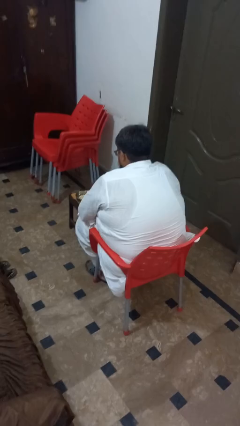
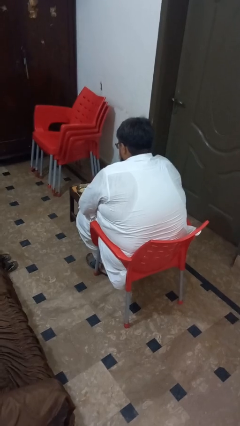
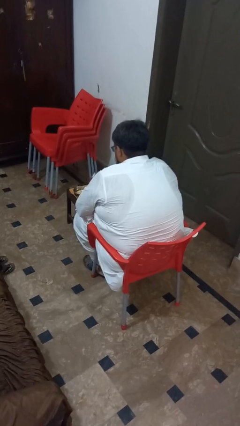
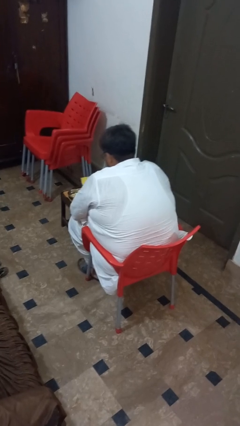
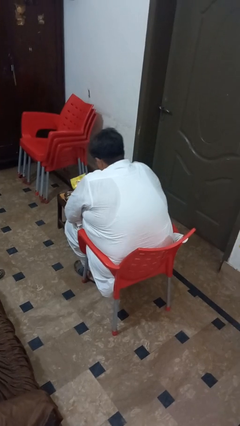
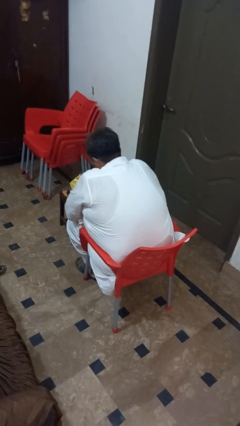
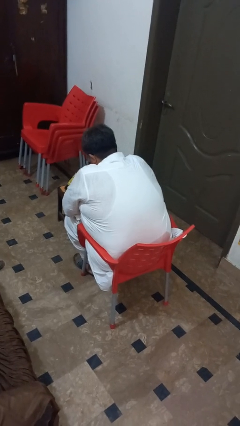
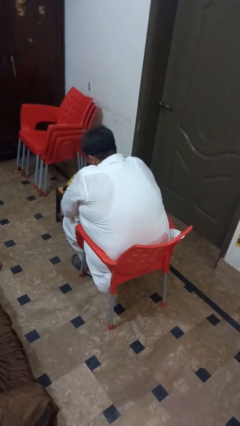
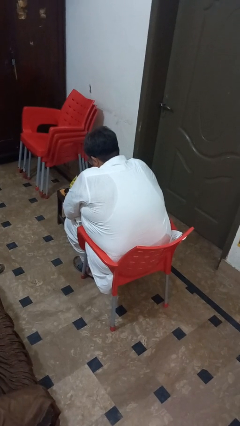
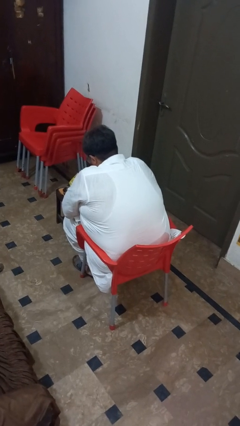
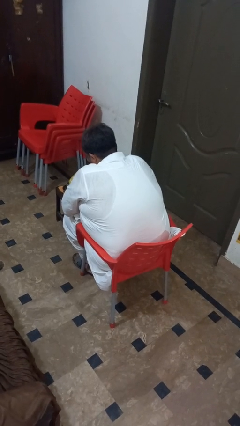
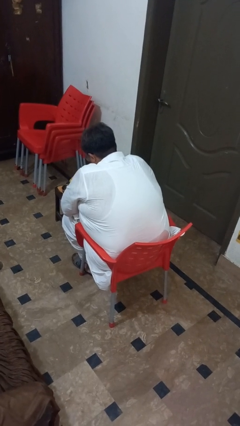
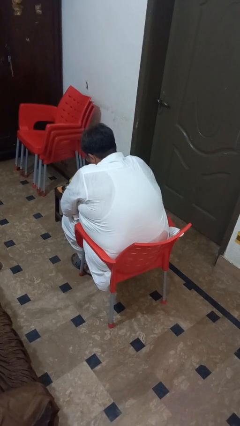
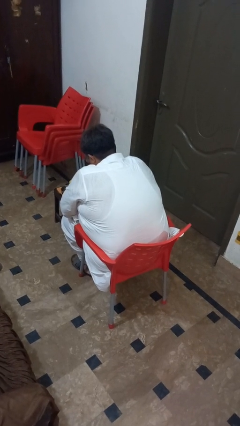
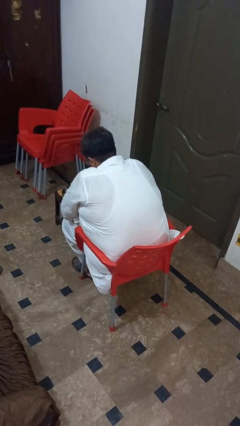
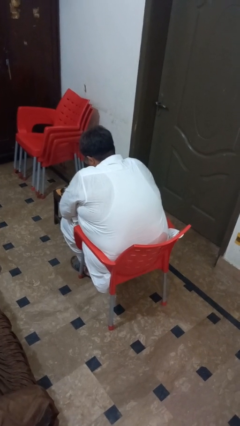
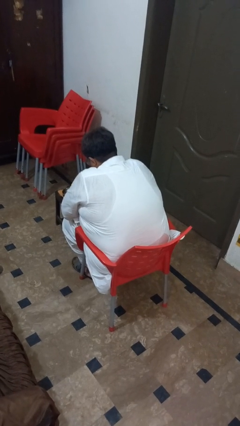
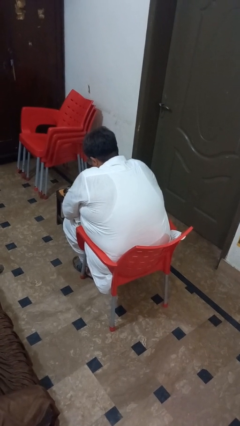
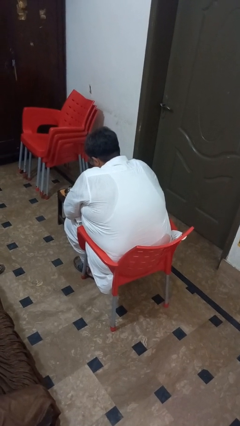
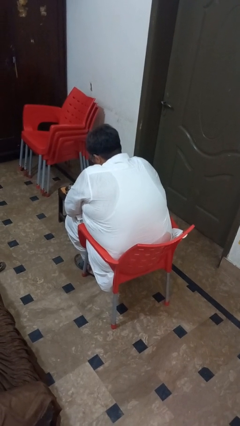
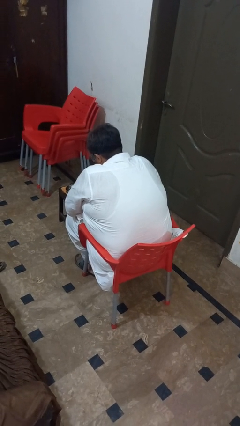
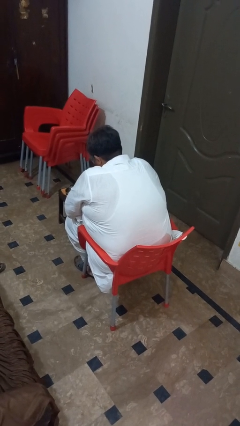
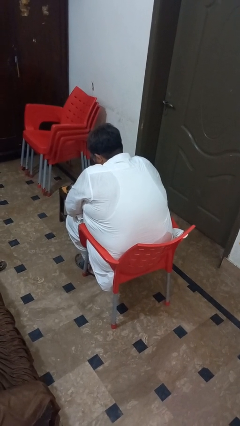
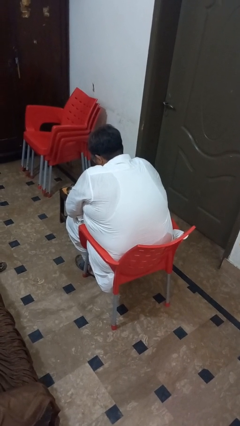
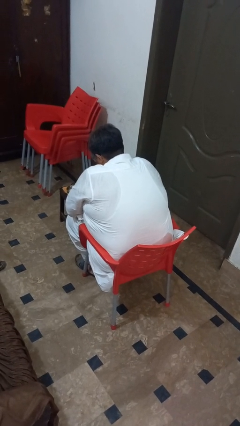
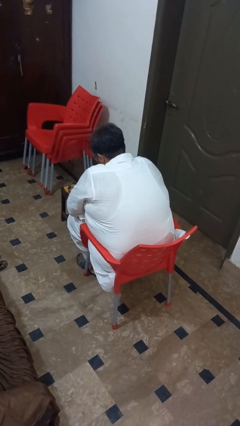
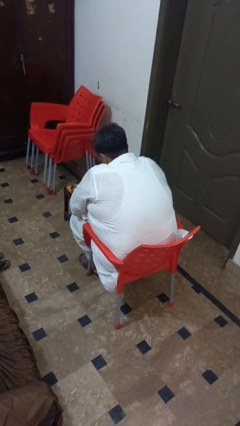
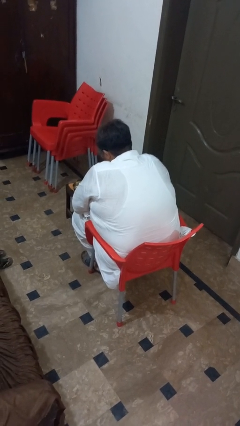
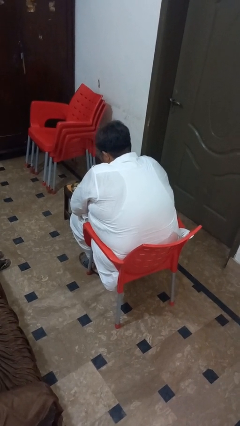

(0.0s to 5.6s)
person pours into bowl

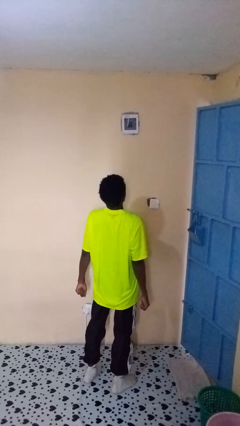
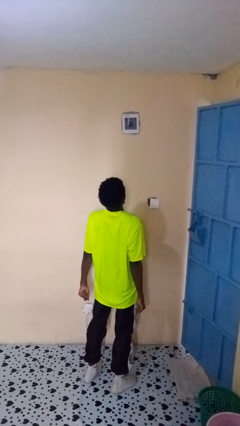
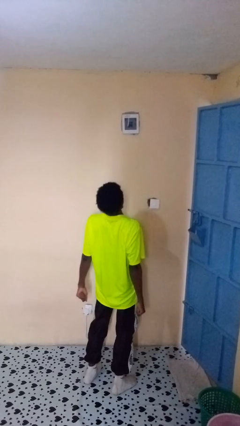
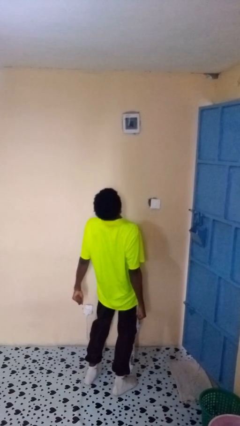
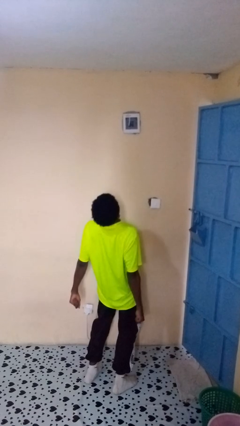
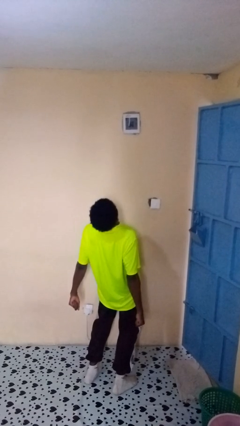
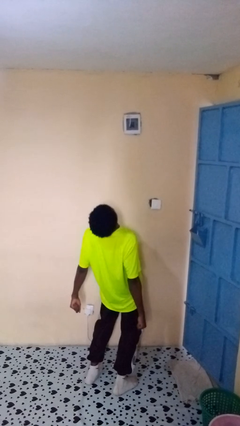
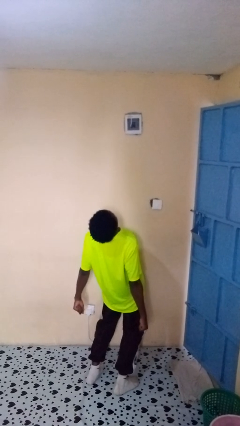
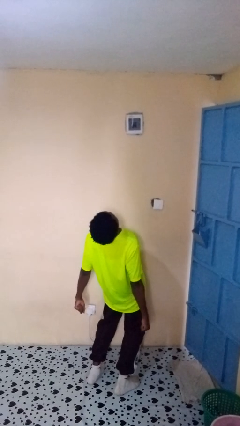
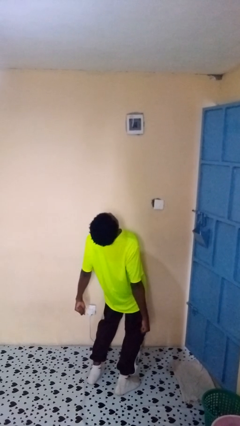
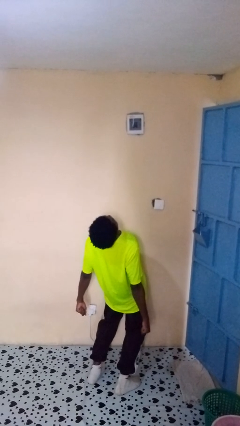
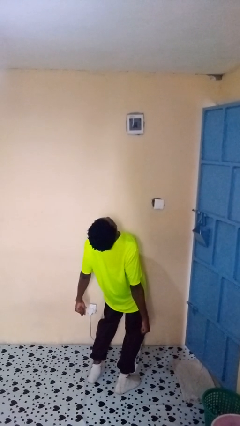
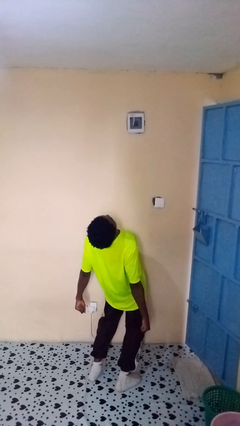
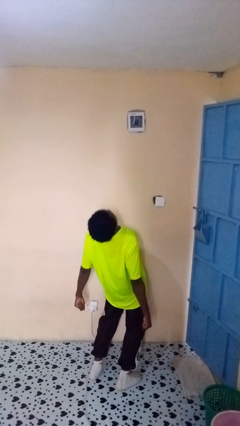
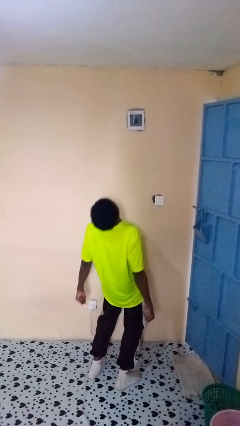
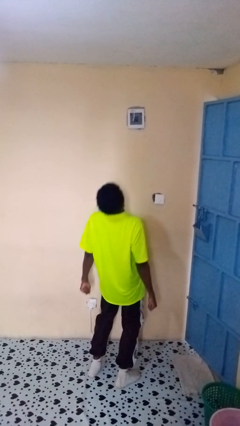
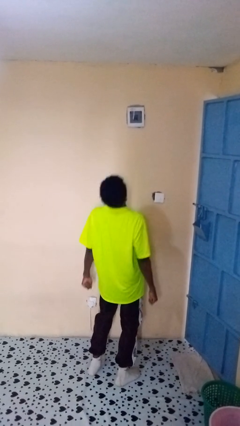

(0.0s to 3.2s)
person stretches back

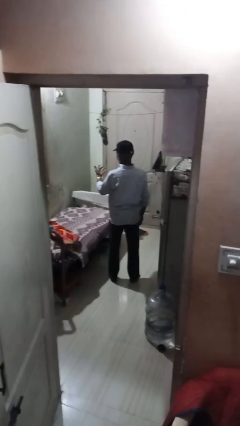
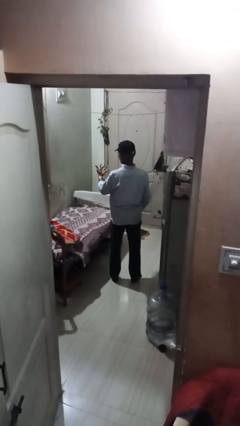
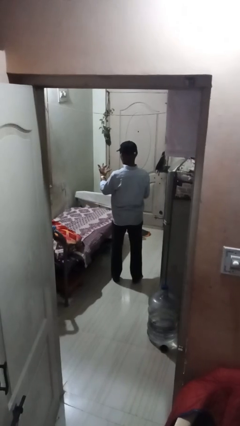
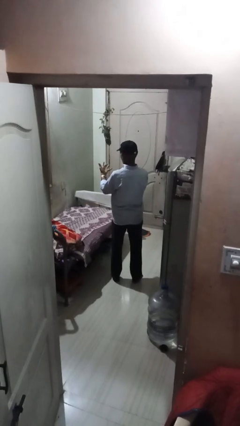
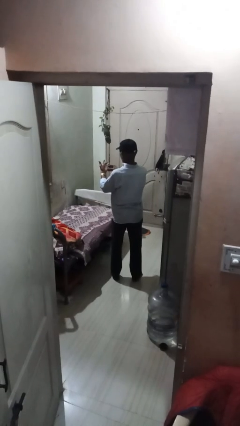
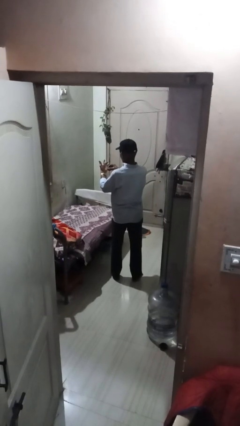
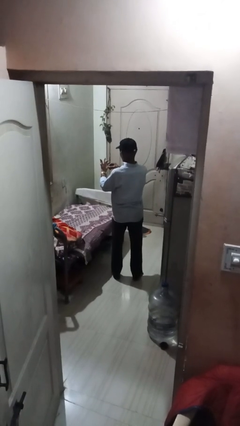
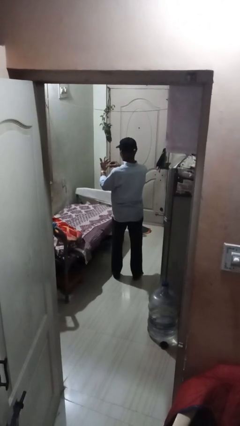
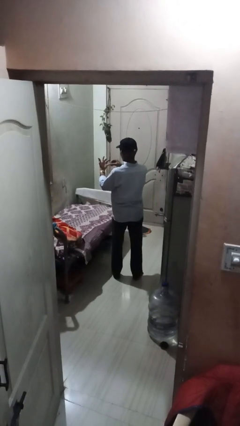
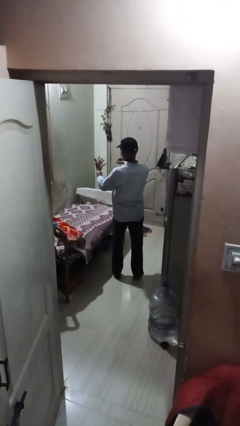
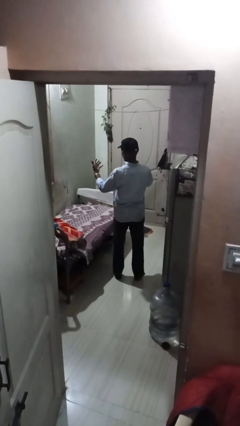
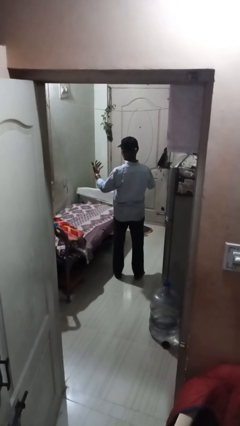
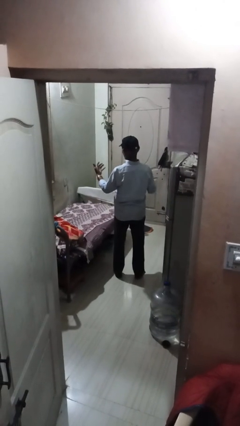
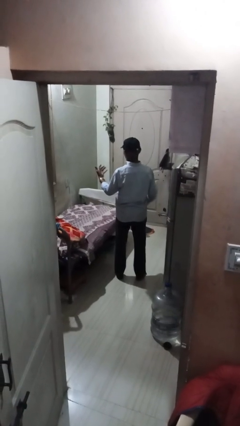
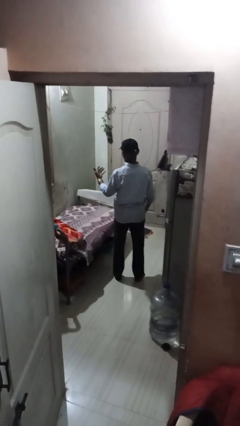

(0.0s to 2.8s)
person takes off ring

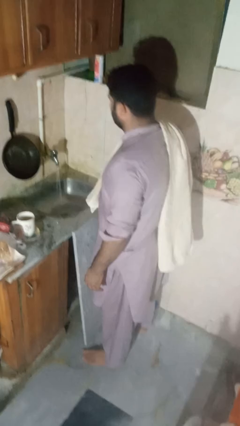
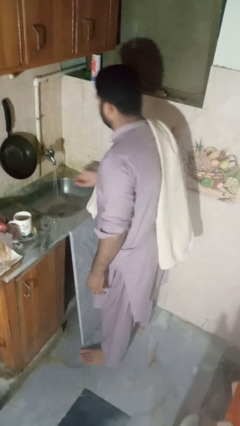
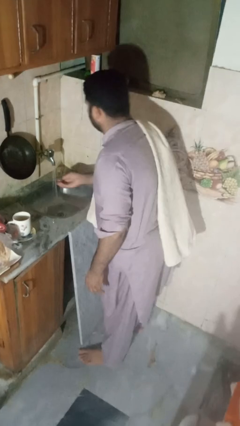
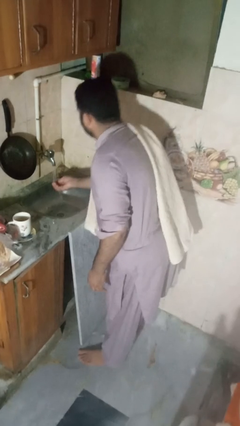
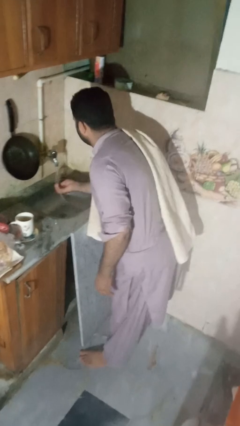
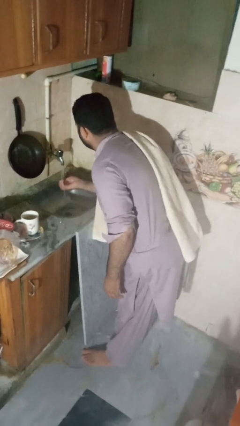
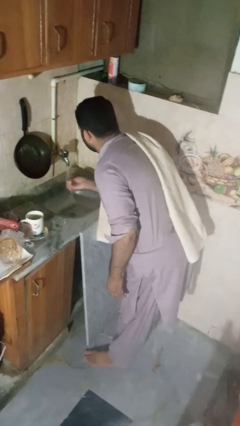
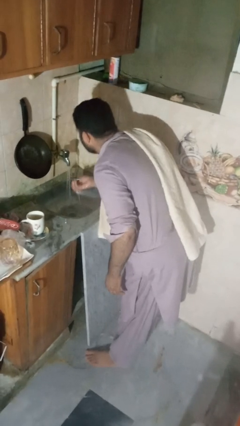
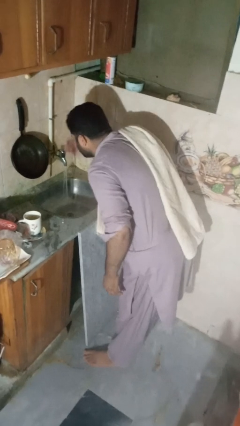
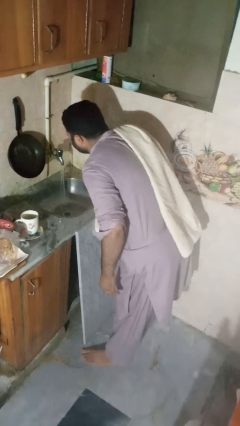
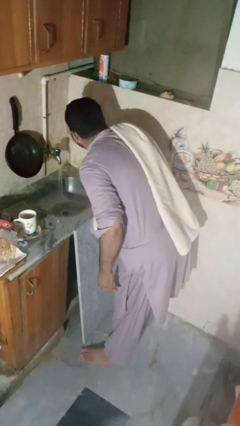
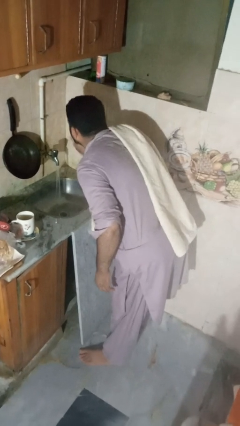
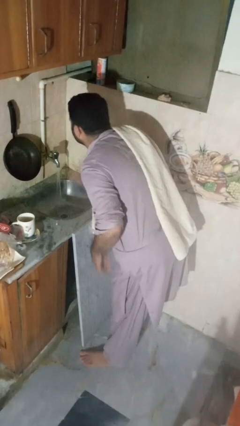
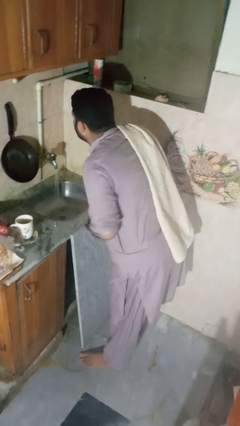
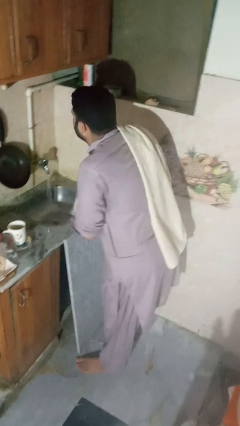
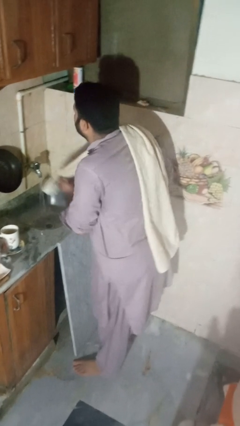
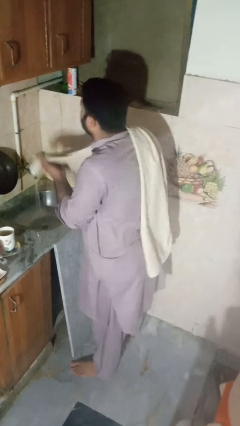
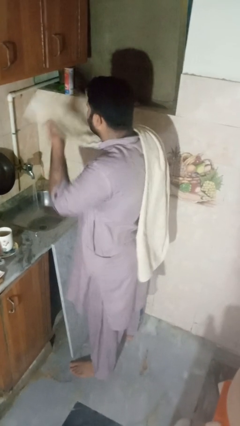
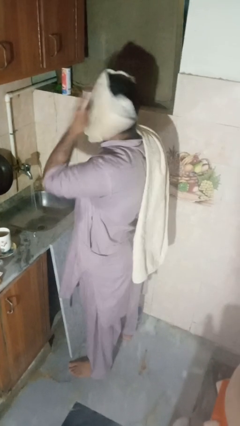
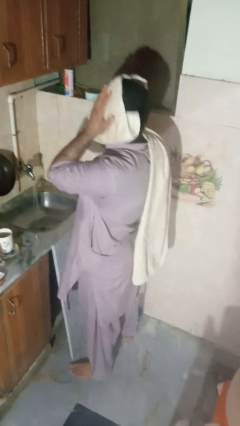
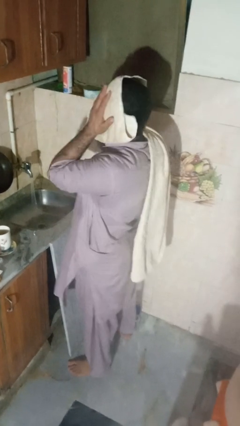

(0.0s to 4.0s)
person washes face

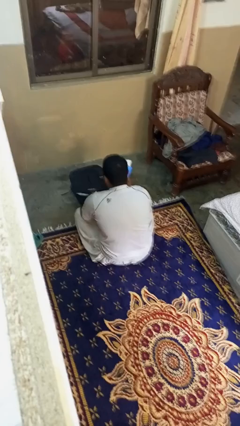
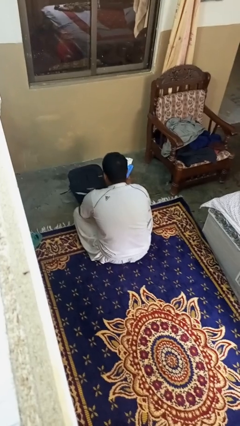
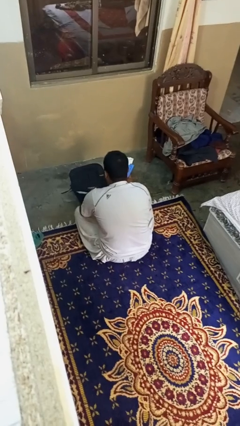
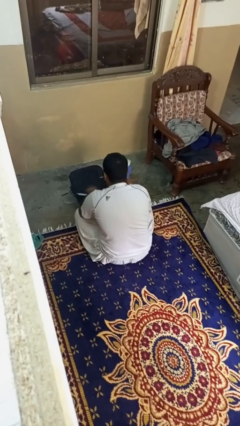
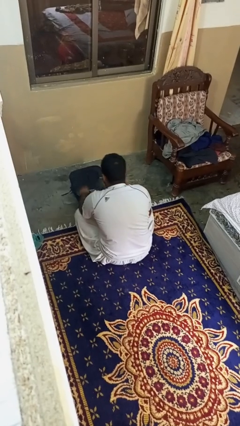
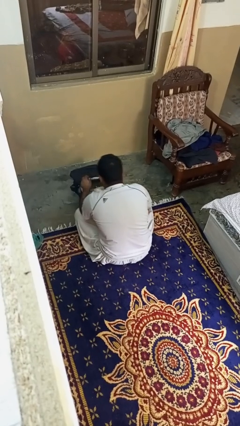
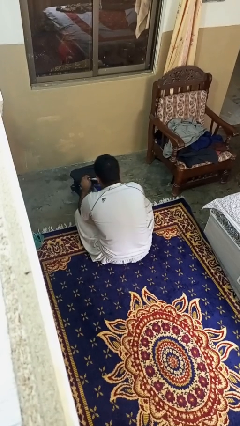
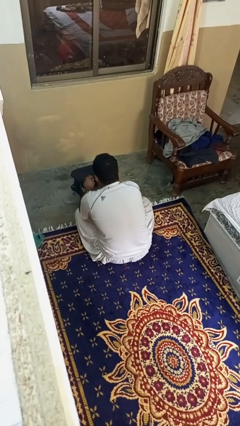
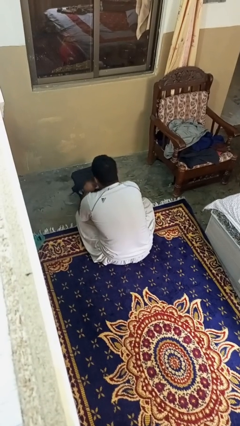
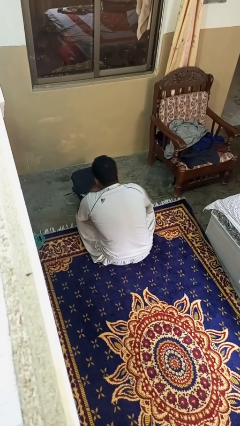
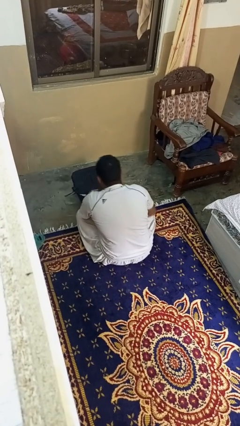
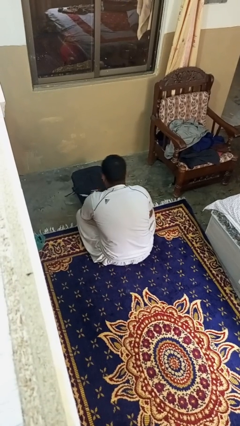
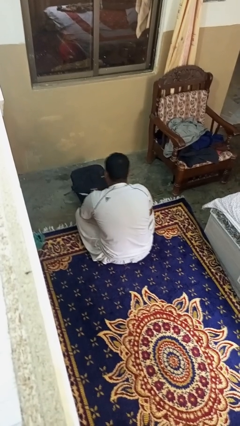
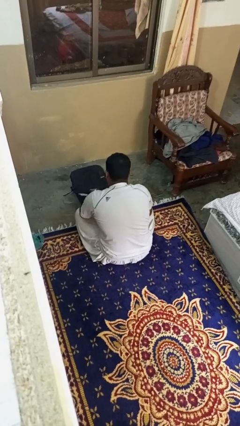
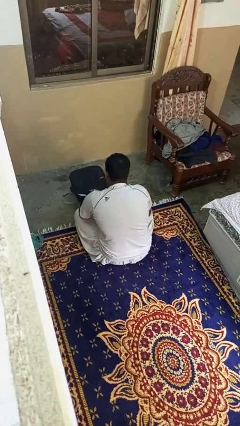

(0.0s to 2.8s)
person puts object into bag
